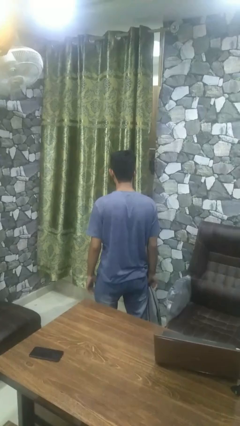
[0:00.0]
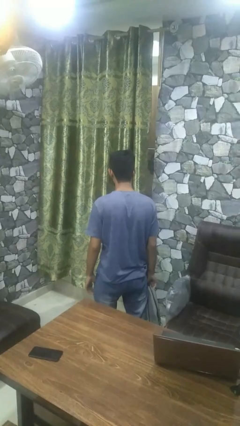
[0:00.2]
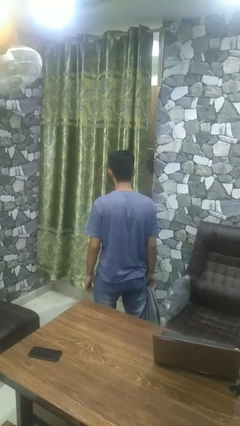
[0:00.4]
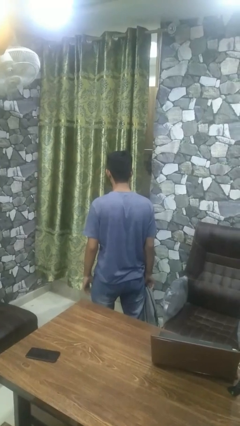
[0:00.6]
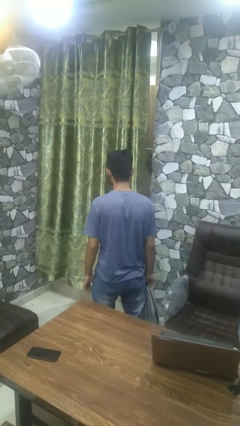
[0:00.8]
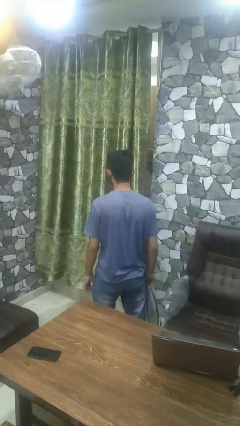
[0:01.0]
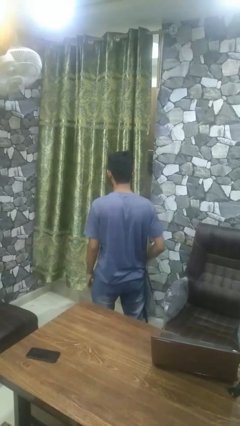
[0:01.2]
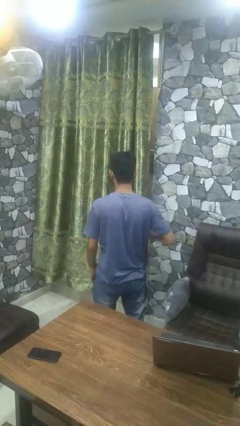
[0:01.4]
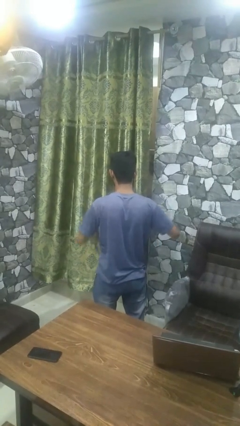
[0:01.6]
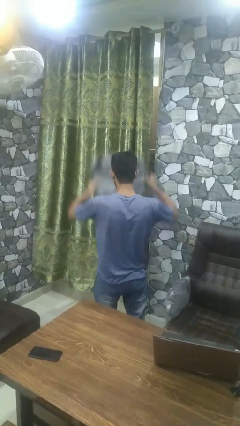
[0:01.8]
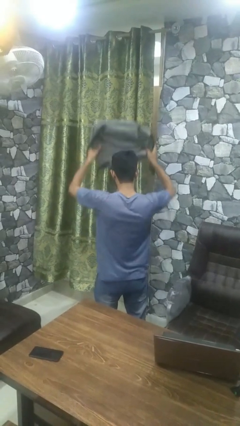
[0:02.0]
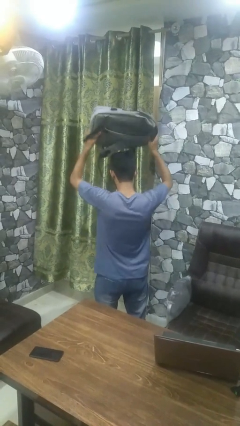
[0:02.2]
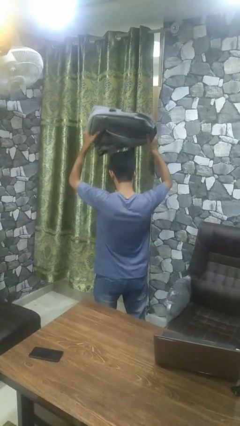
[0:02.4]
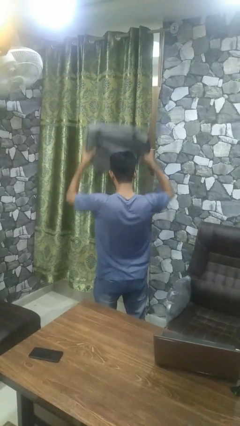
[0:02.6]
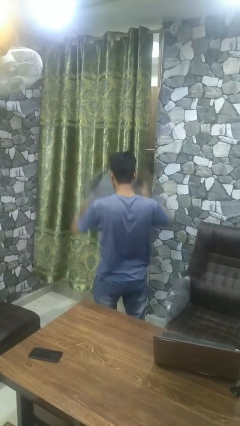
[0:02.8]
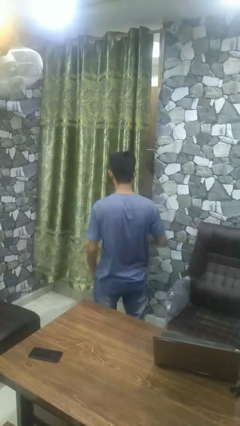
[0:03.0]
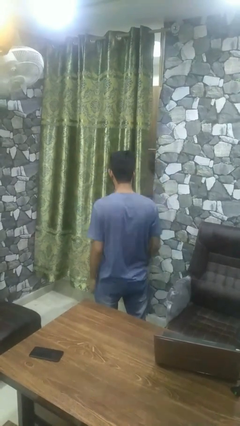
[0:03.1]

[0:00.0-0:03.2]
person holds object above head

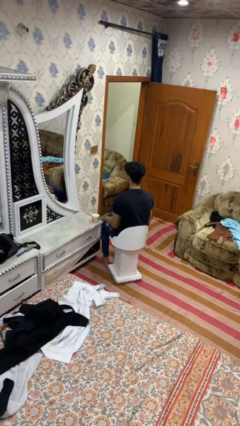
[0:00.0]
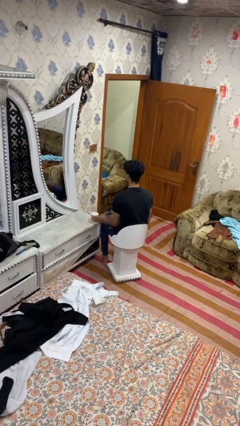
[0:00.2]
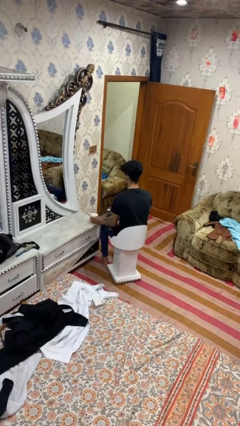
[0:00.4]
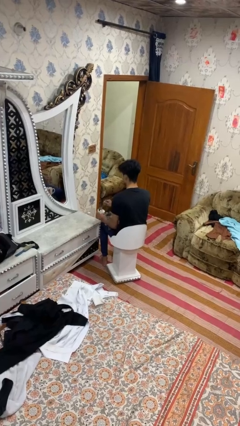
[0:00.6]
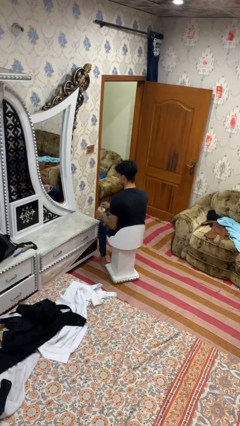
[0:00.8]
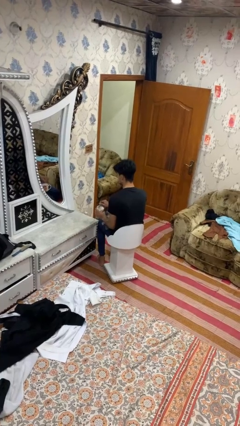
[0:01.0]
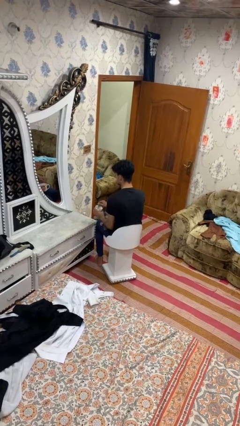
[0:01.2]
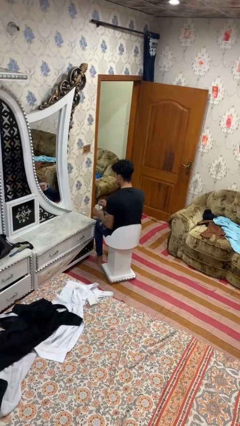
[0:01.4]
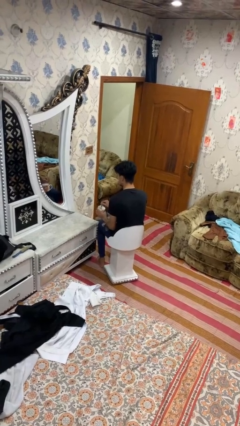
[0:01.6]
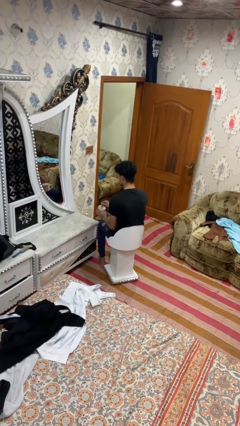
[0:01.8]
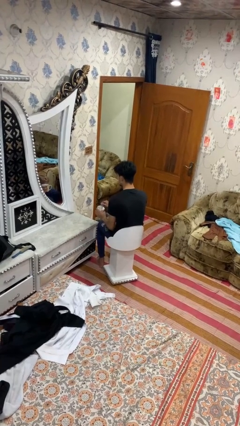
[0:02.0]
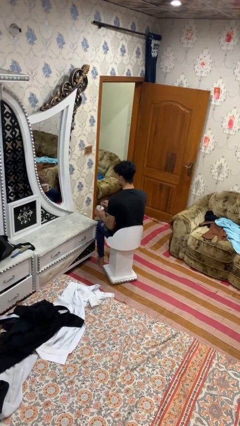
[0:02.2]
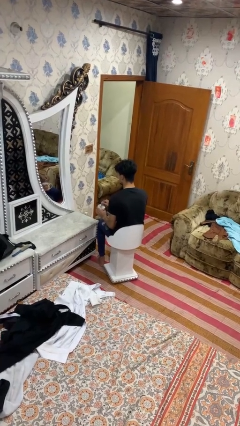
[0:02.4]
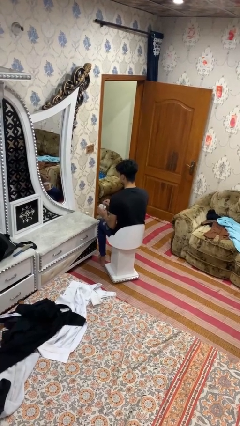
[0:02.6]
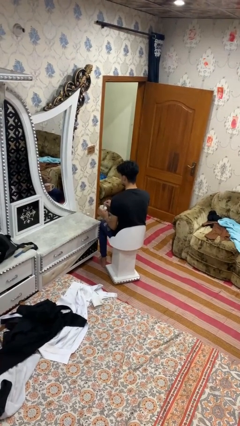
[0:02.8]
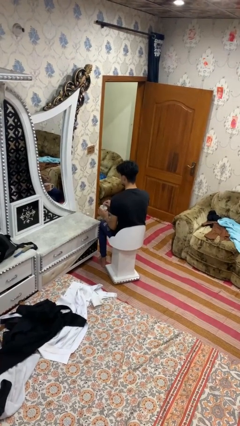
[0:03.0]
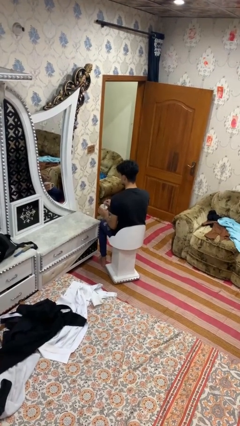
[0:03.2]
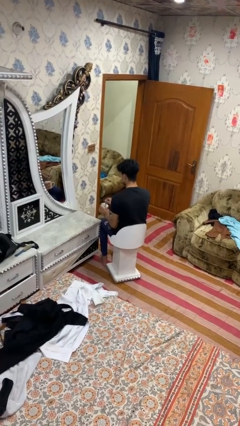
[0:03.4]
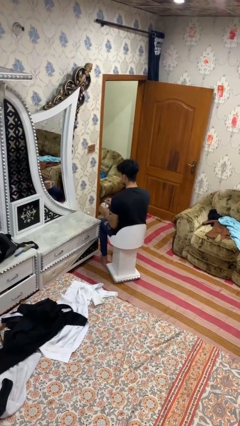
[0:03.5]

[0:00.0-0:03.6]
person stirs mug

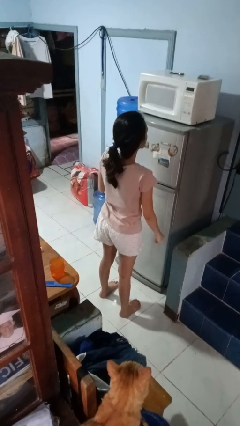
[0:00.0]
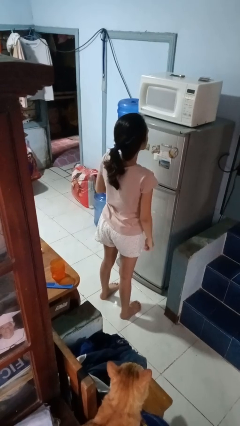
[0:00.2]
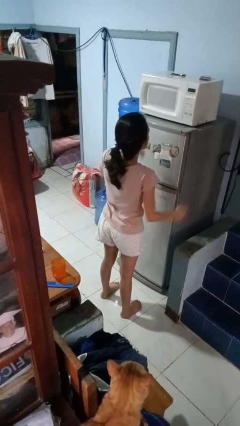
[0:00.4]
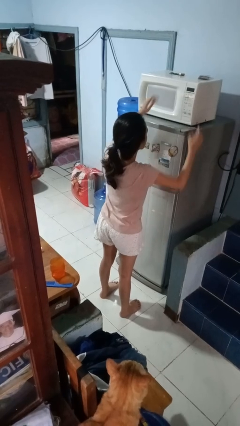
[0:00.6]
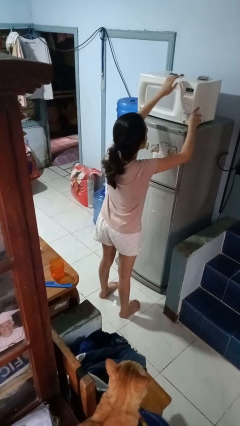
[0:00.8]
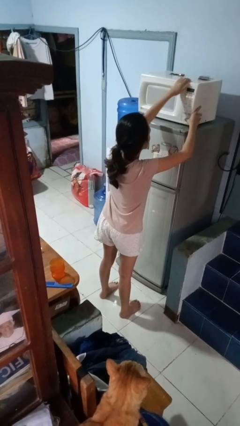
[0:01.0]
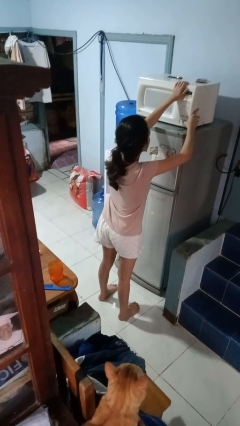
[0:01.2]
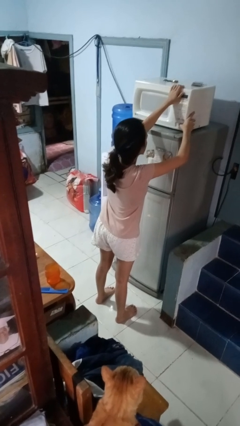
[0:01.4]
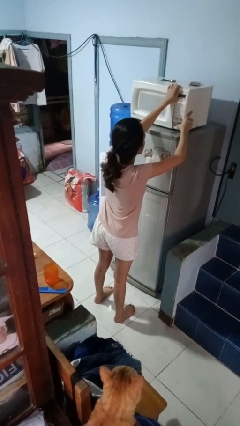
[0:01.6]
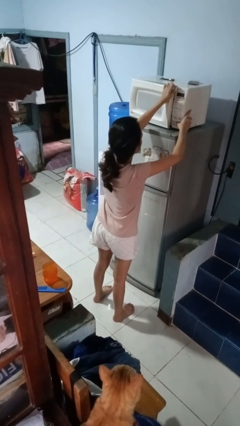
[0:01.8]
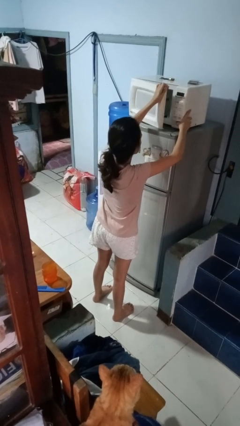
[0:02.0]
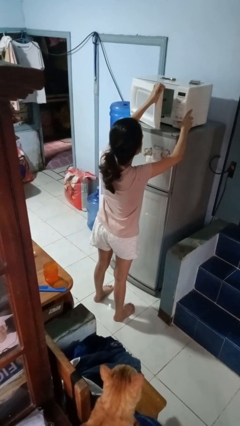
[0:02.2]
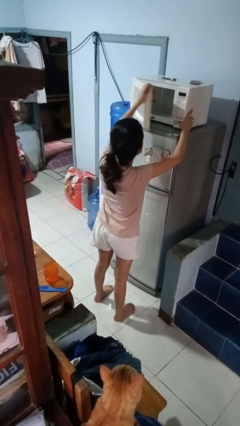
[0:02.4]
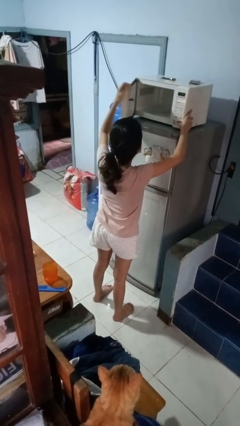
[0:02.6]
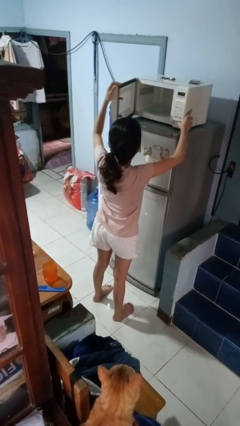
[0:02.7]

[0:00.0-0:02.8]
person opens microwave

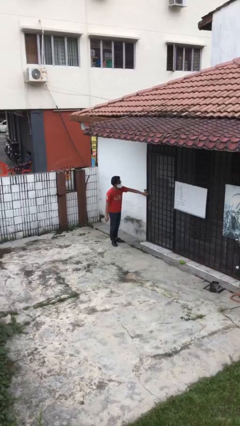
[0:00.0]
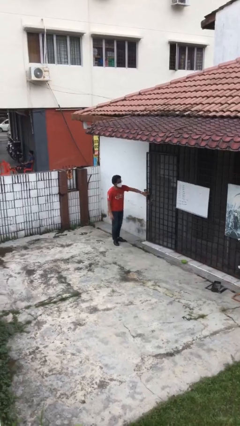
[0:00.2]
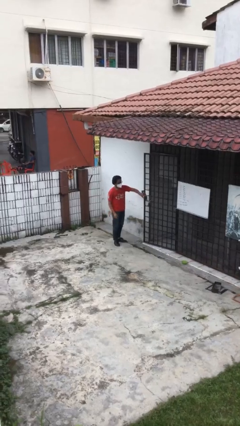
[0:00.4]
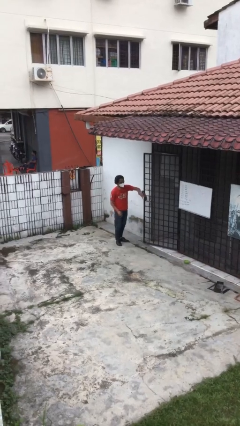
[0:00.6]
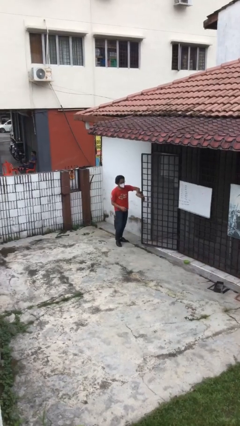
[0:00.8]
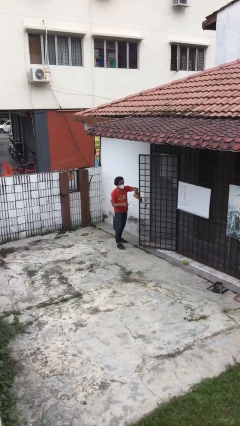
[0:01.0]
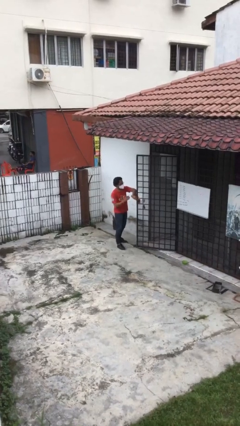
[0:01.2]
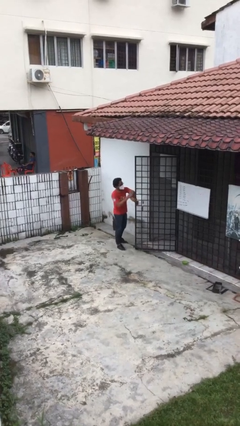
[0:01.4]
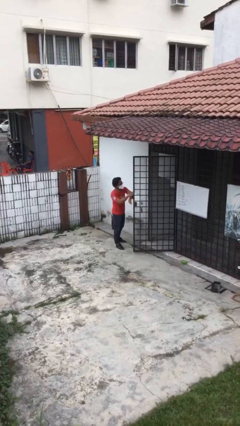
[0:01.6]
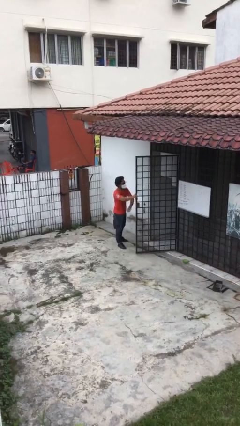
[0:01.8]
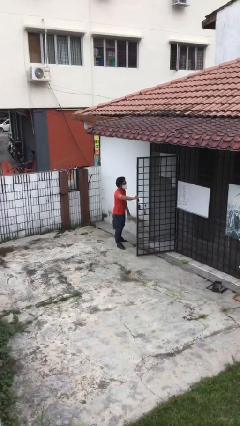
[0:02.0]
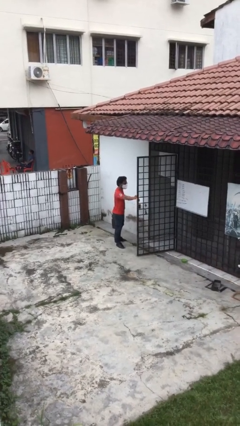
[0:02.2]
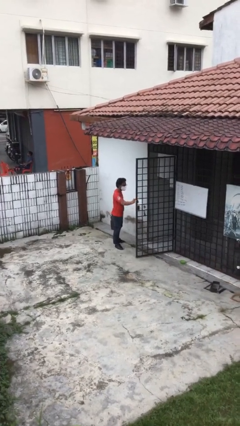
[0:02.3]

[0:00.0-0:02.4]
person opens facility door

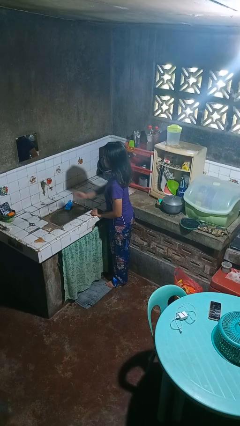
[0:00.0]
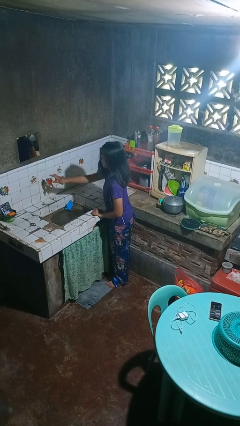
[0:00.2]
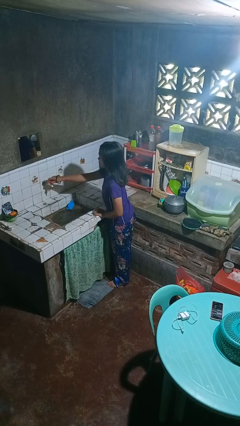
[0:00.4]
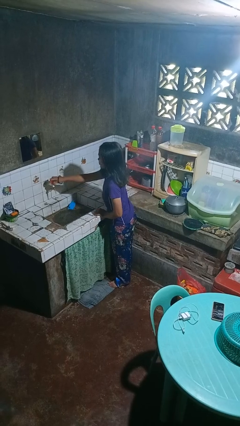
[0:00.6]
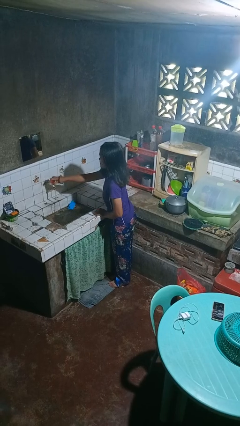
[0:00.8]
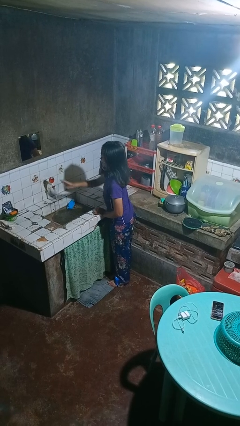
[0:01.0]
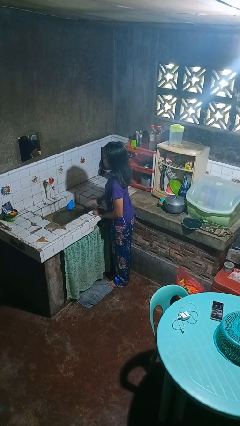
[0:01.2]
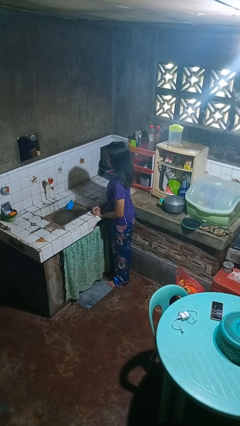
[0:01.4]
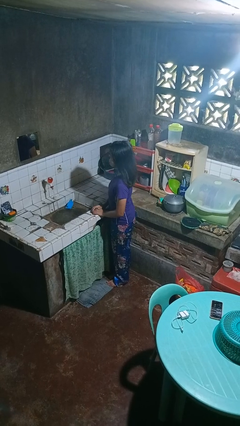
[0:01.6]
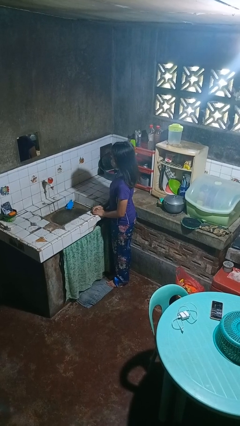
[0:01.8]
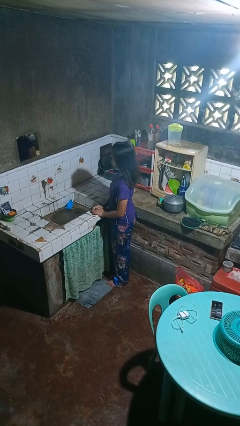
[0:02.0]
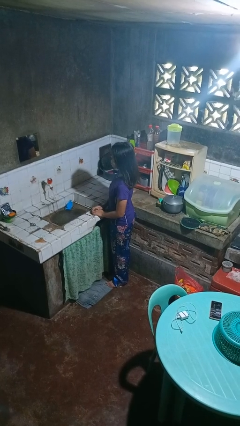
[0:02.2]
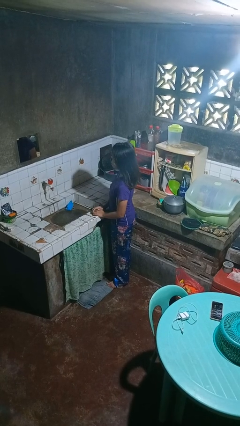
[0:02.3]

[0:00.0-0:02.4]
person turns on faucet

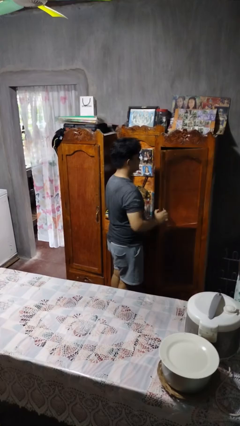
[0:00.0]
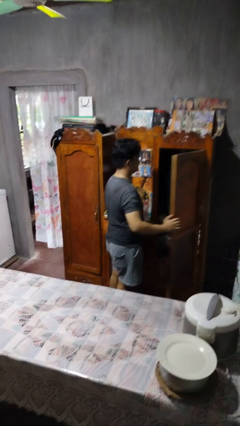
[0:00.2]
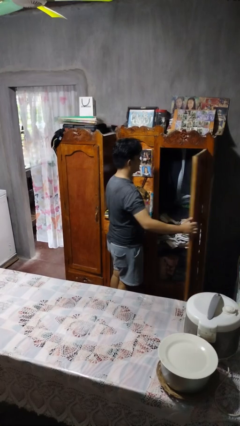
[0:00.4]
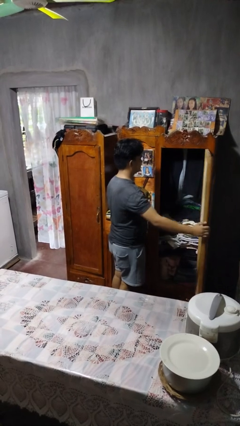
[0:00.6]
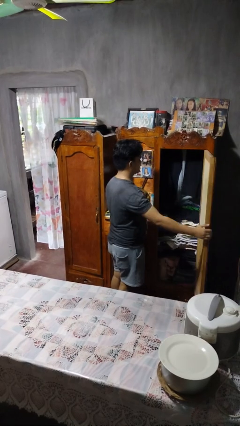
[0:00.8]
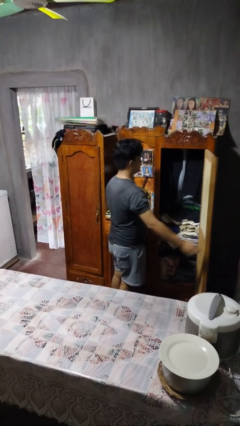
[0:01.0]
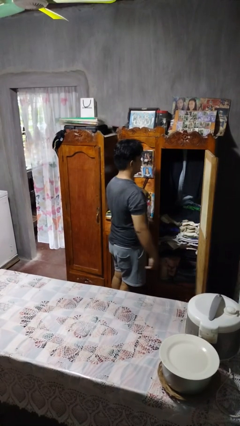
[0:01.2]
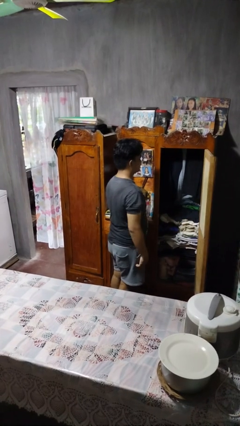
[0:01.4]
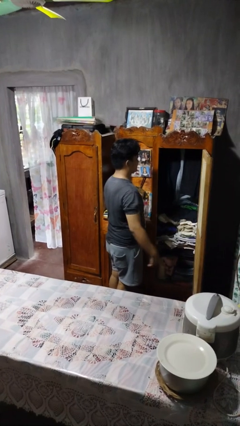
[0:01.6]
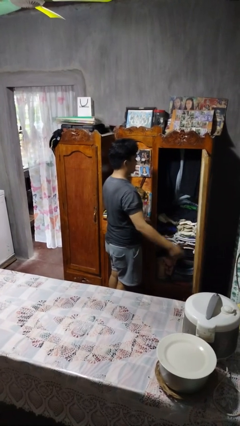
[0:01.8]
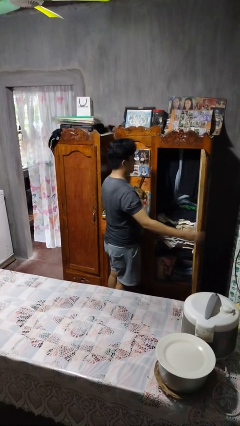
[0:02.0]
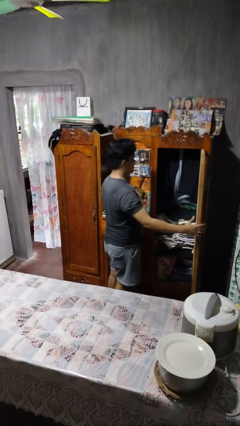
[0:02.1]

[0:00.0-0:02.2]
person opens closet door

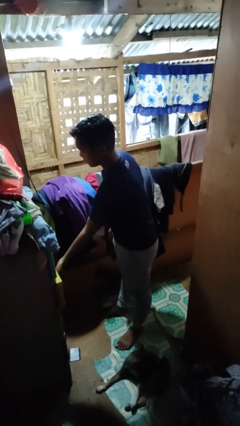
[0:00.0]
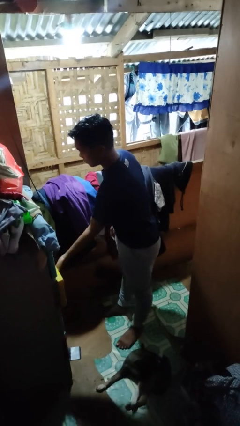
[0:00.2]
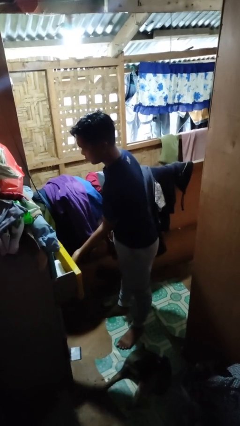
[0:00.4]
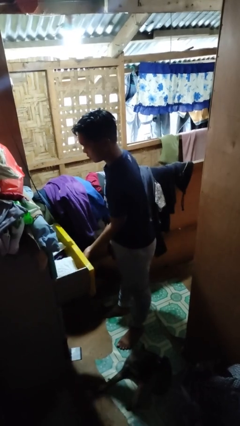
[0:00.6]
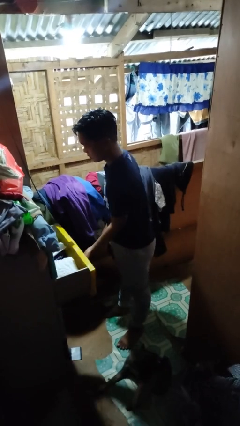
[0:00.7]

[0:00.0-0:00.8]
person opens dresser drawer
